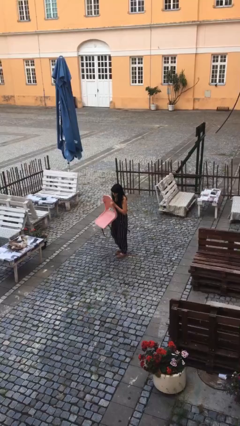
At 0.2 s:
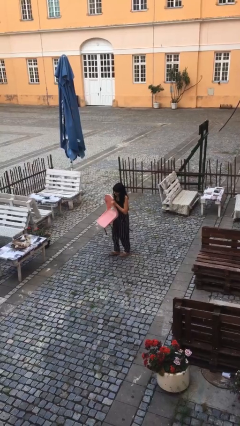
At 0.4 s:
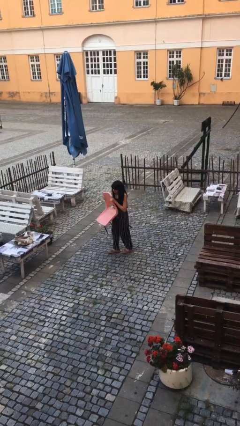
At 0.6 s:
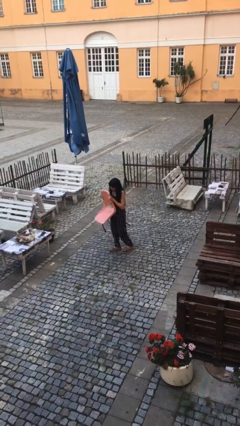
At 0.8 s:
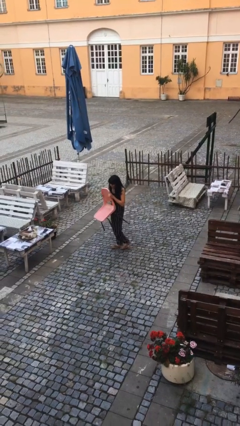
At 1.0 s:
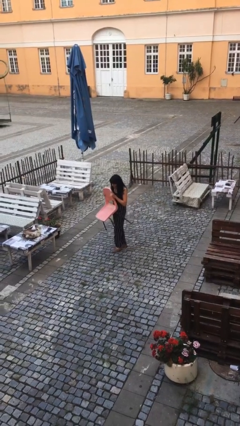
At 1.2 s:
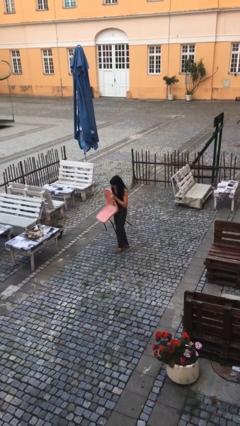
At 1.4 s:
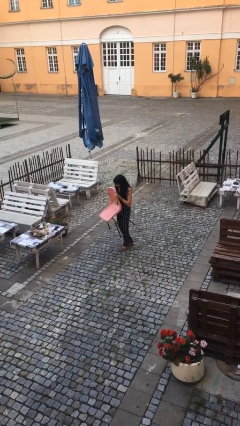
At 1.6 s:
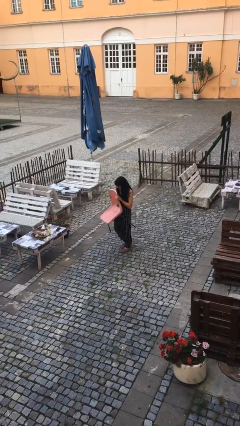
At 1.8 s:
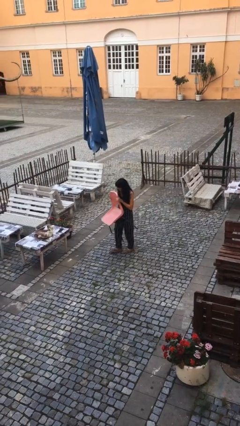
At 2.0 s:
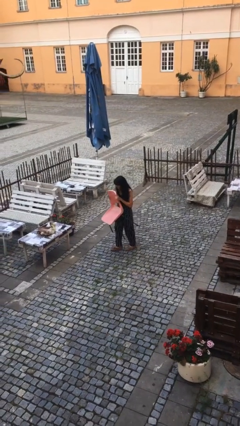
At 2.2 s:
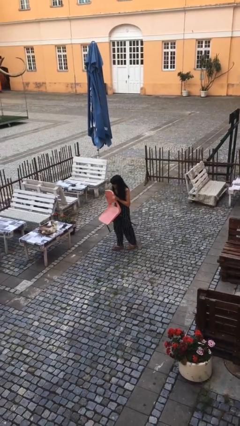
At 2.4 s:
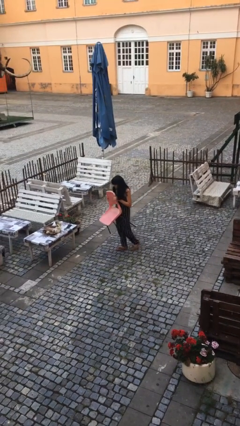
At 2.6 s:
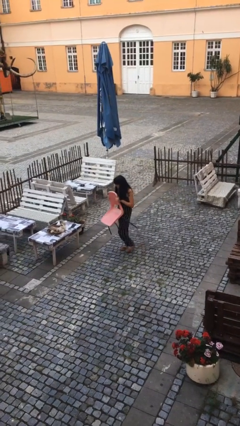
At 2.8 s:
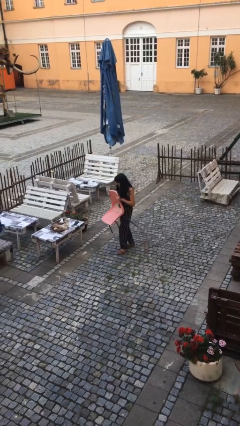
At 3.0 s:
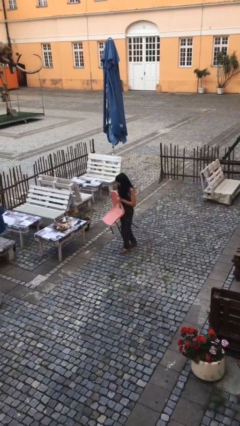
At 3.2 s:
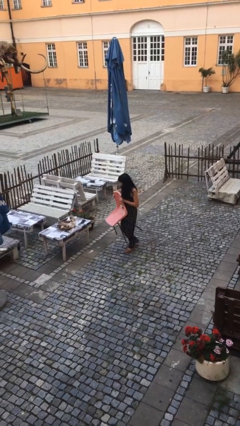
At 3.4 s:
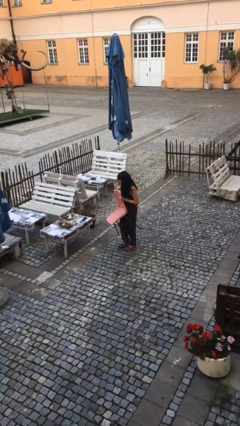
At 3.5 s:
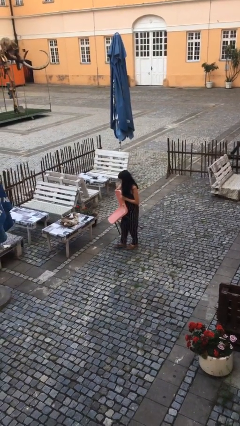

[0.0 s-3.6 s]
person carries heavy object

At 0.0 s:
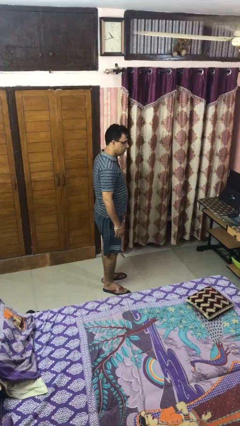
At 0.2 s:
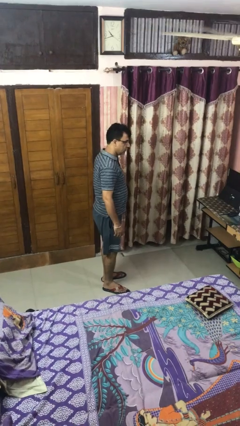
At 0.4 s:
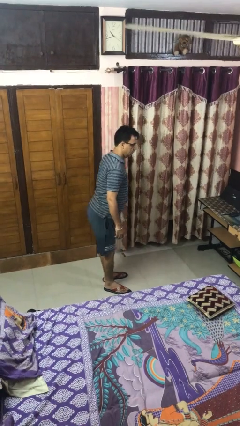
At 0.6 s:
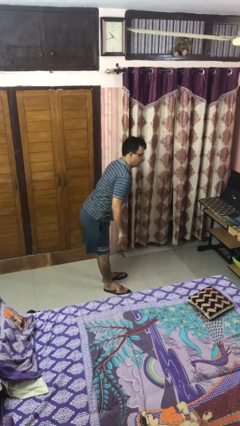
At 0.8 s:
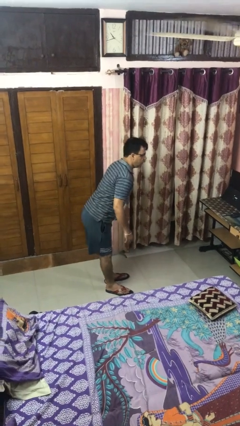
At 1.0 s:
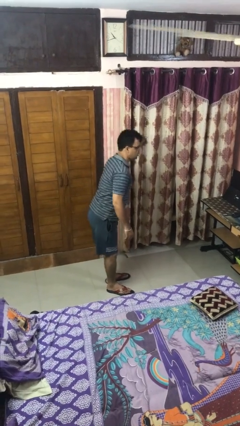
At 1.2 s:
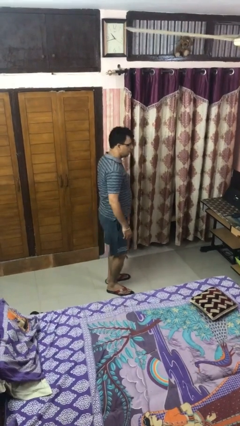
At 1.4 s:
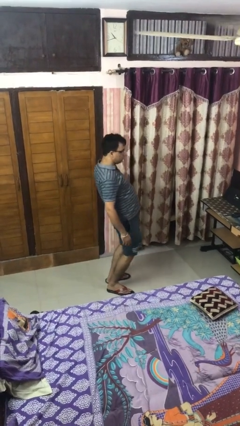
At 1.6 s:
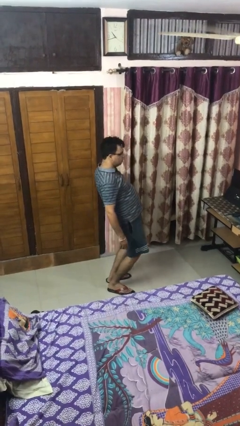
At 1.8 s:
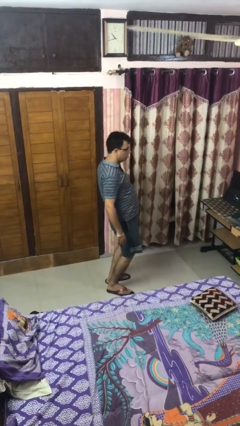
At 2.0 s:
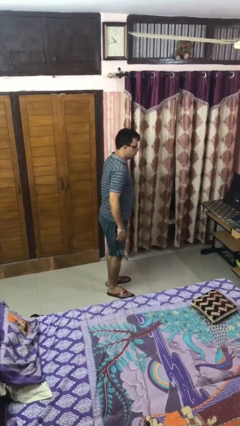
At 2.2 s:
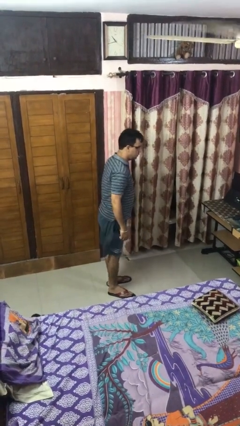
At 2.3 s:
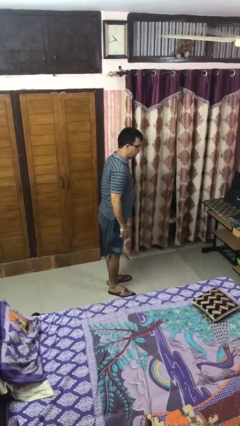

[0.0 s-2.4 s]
person wiggles hips

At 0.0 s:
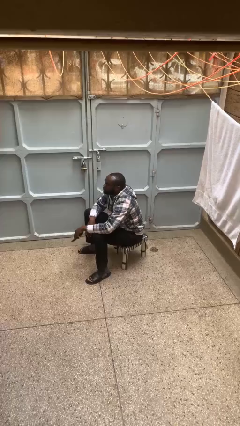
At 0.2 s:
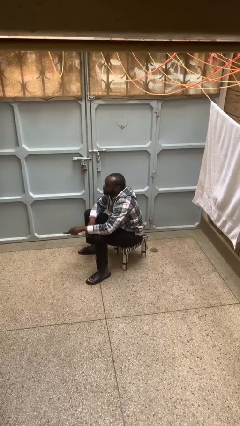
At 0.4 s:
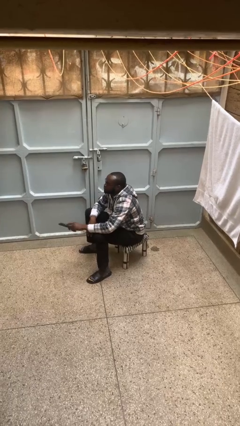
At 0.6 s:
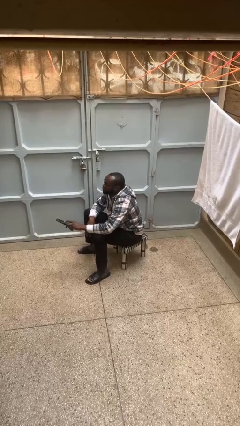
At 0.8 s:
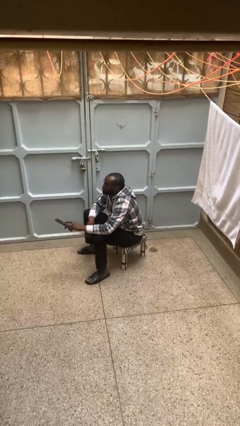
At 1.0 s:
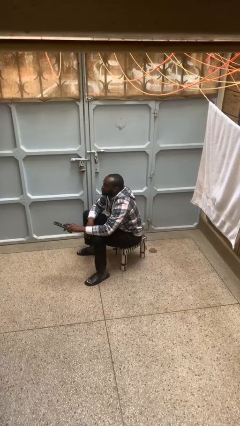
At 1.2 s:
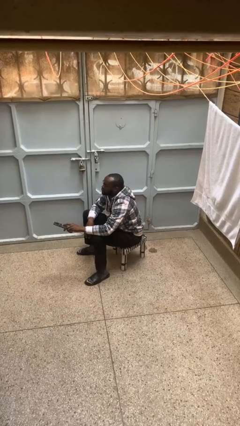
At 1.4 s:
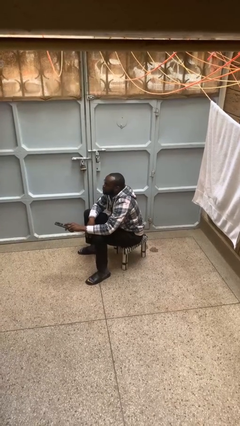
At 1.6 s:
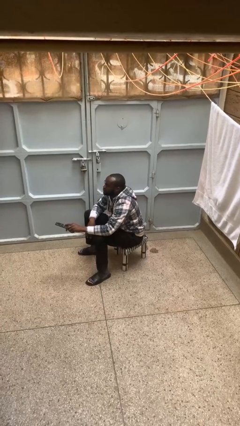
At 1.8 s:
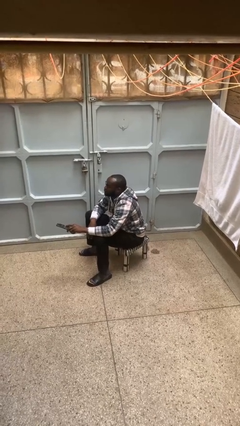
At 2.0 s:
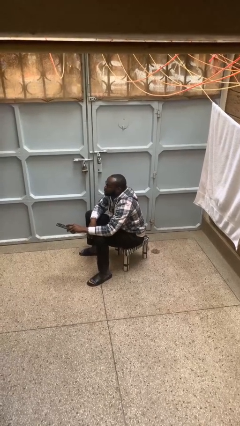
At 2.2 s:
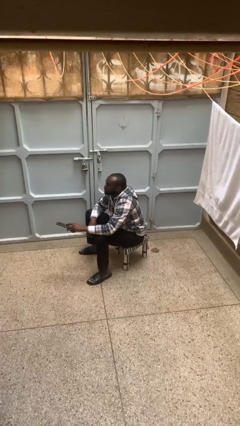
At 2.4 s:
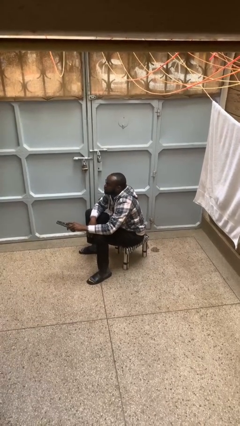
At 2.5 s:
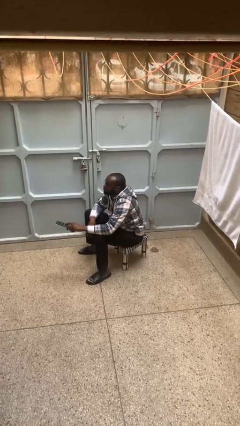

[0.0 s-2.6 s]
person uses television remote

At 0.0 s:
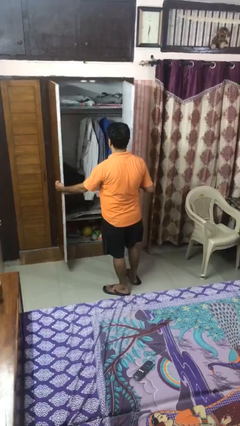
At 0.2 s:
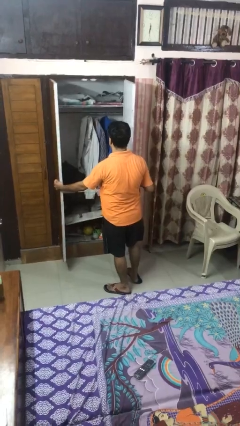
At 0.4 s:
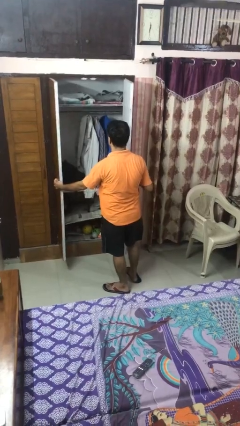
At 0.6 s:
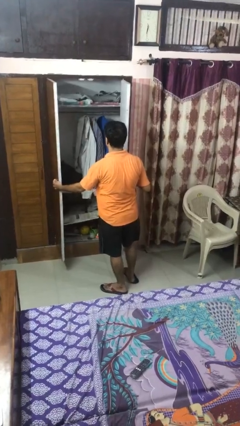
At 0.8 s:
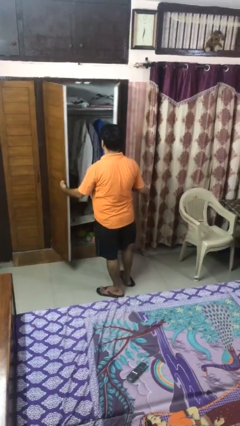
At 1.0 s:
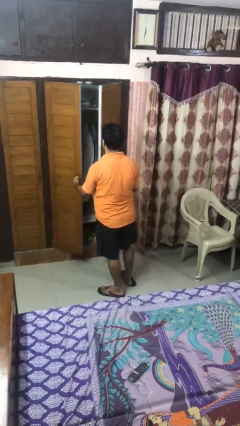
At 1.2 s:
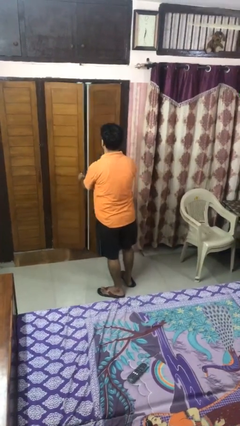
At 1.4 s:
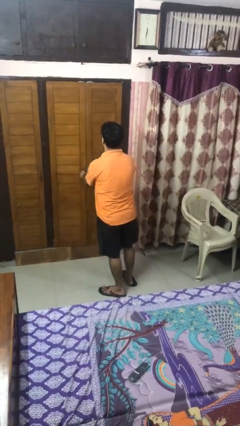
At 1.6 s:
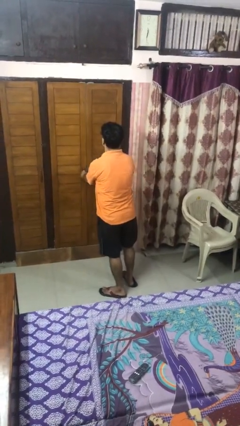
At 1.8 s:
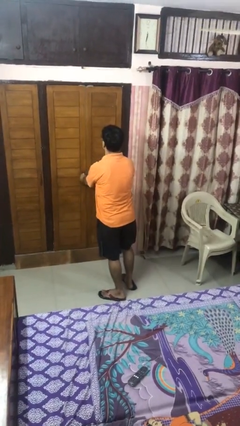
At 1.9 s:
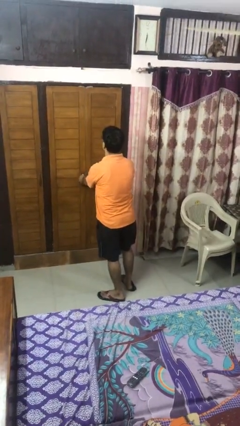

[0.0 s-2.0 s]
person closes closet door

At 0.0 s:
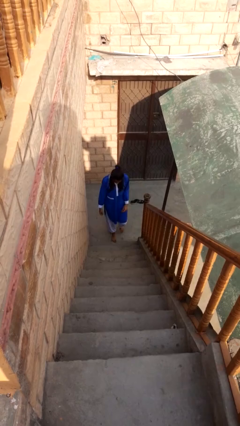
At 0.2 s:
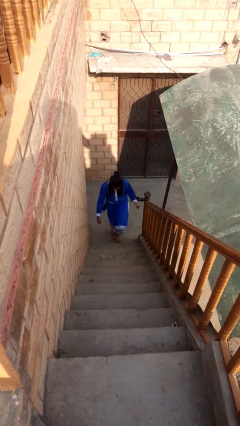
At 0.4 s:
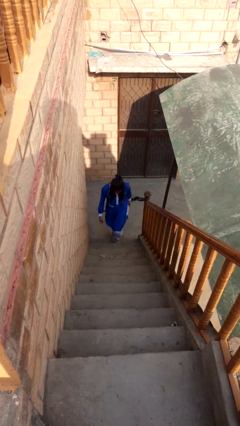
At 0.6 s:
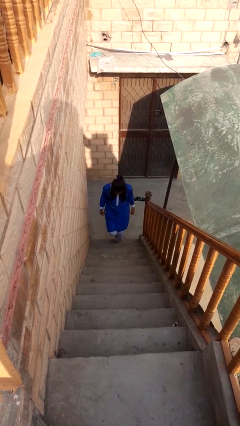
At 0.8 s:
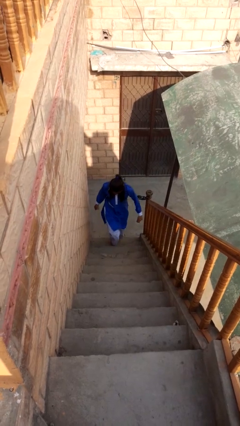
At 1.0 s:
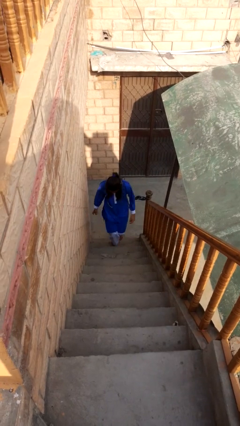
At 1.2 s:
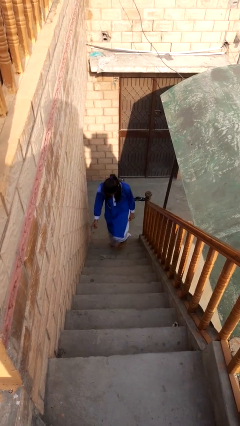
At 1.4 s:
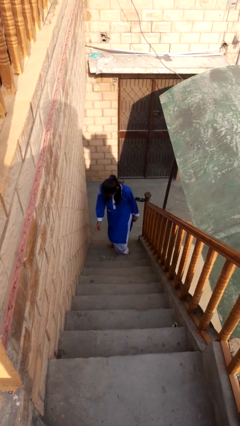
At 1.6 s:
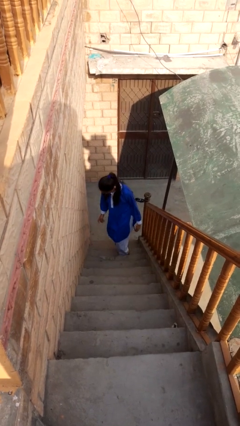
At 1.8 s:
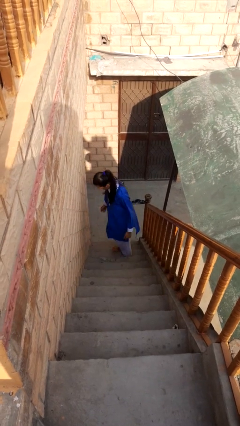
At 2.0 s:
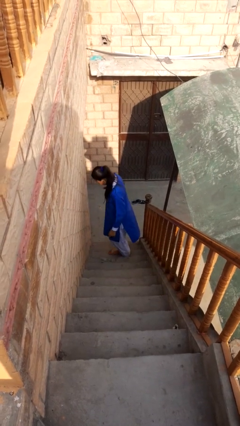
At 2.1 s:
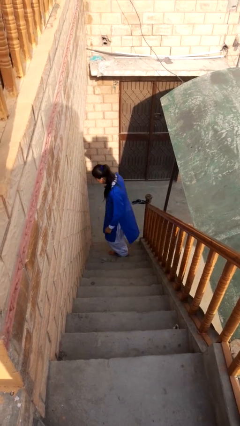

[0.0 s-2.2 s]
person climbs up stairs

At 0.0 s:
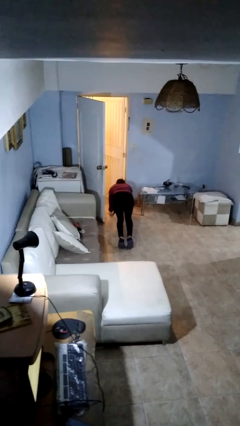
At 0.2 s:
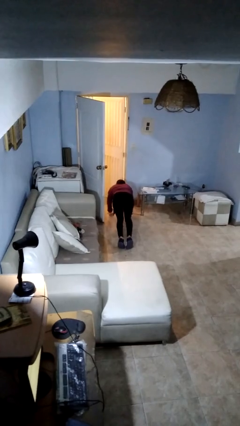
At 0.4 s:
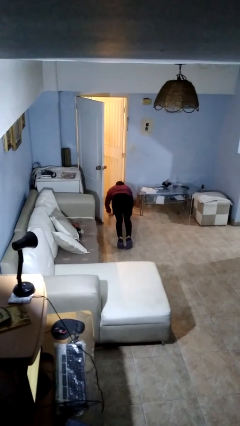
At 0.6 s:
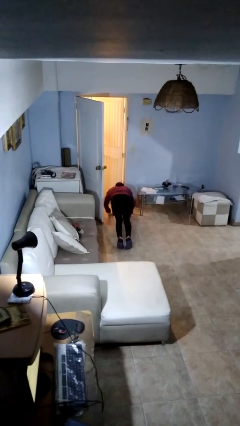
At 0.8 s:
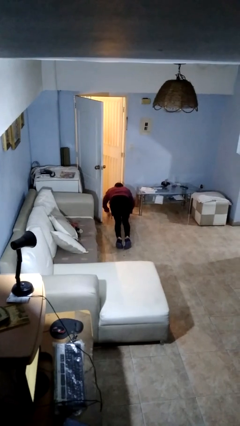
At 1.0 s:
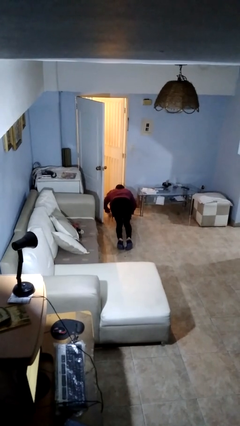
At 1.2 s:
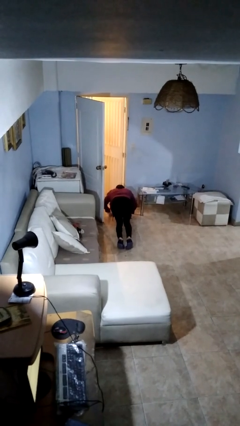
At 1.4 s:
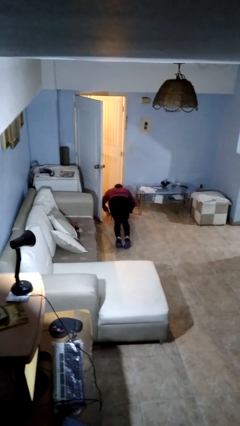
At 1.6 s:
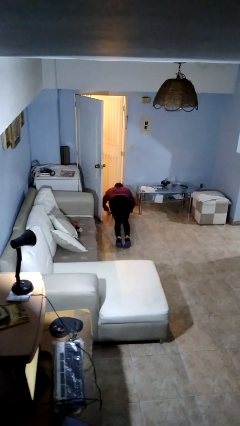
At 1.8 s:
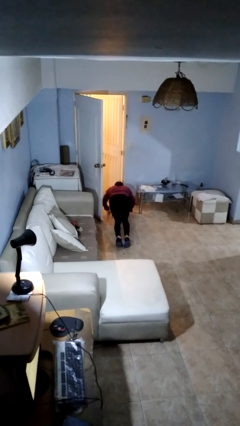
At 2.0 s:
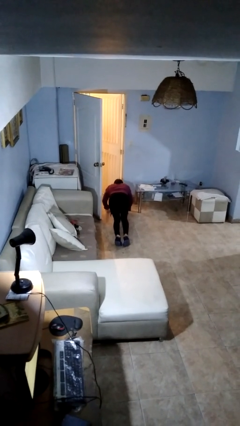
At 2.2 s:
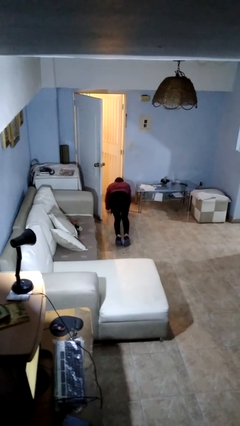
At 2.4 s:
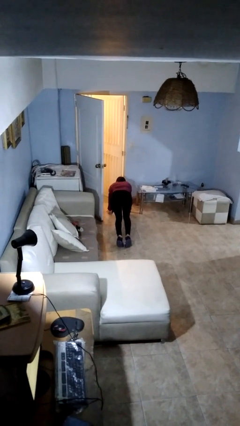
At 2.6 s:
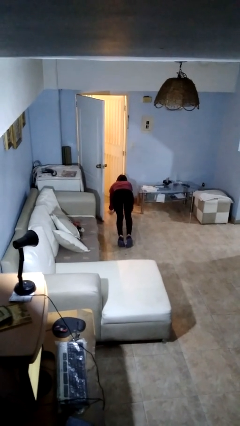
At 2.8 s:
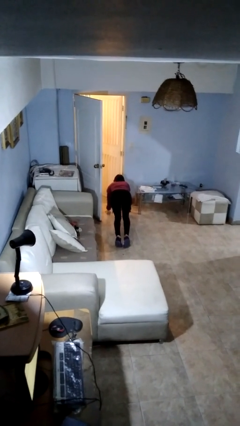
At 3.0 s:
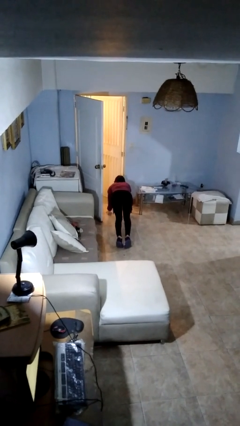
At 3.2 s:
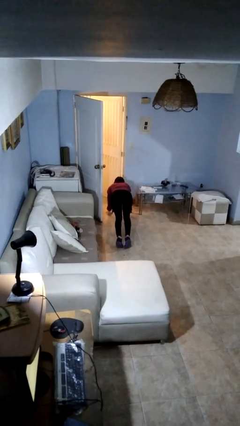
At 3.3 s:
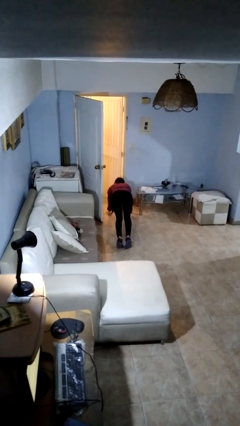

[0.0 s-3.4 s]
person exercises with pushup

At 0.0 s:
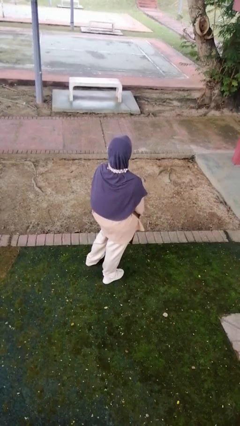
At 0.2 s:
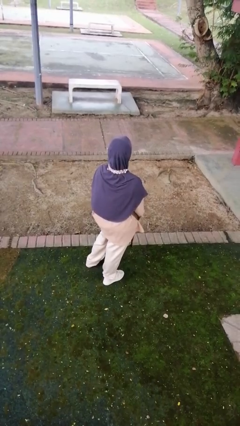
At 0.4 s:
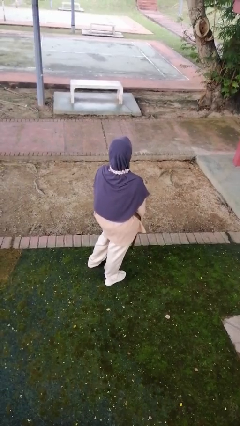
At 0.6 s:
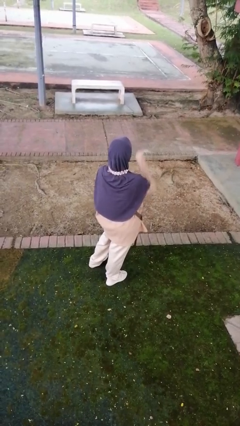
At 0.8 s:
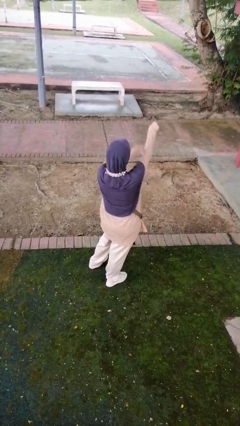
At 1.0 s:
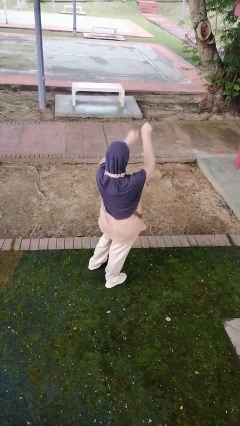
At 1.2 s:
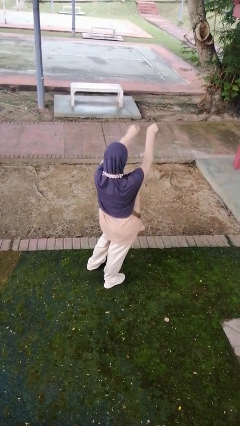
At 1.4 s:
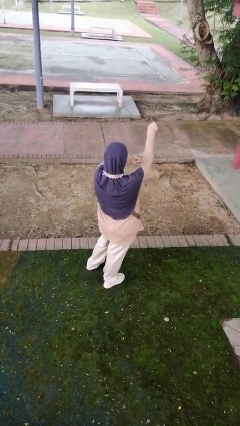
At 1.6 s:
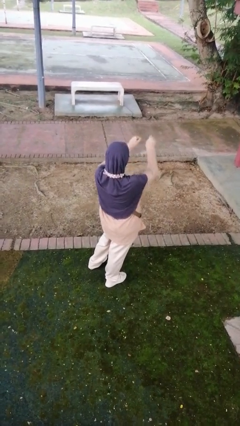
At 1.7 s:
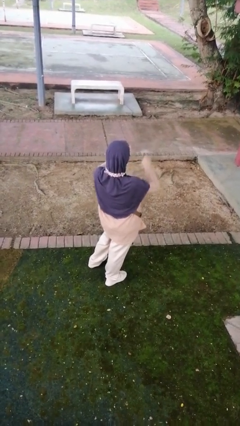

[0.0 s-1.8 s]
person punches
